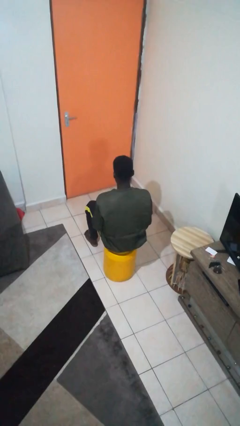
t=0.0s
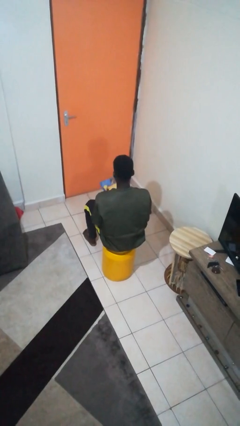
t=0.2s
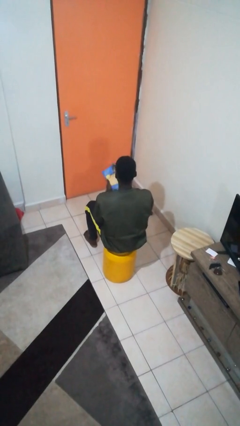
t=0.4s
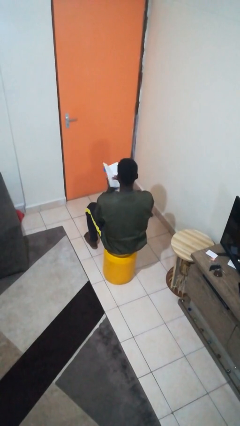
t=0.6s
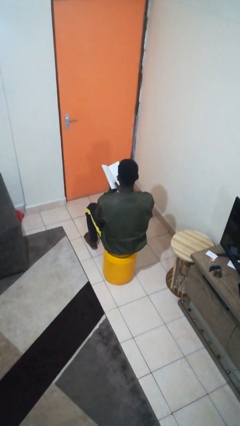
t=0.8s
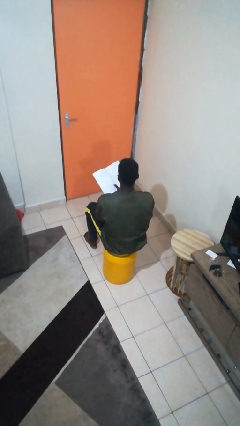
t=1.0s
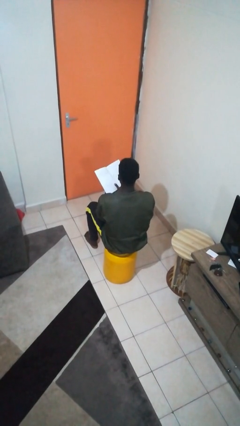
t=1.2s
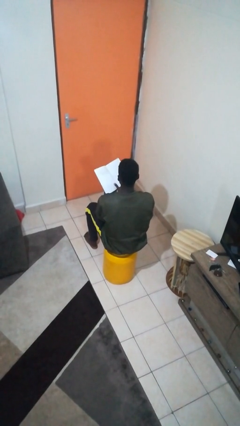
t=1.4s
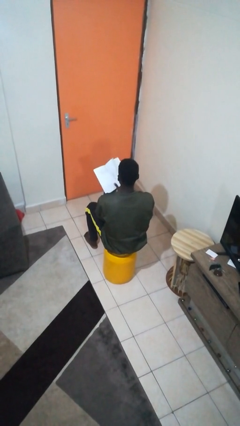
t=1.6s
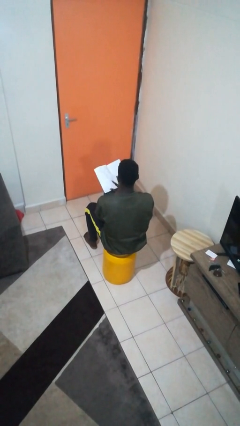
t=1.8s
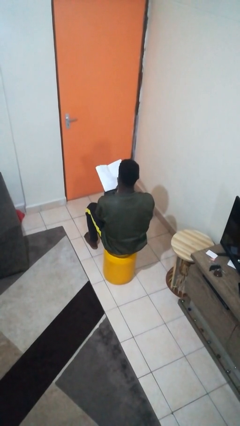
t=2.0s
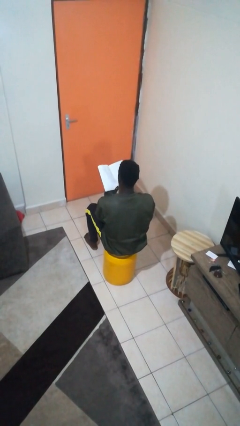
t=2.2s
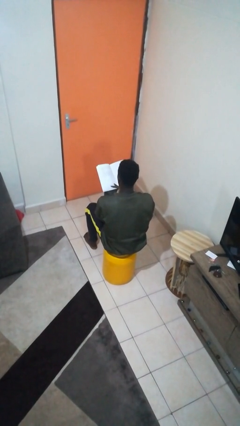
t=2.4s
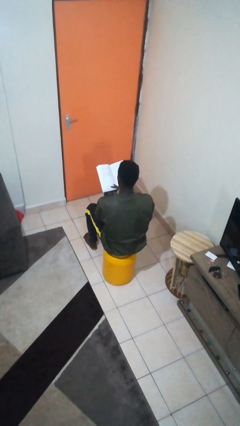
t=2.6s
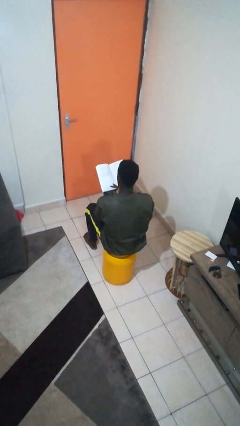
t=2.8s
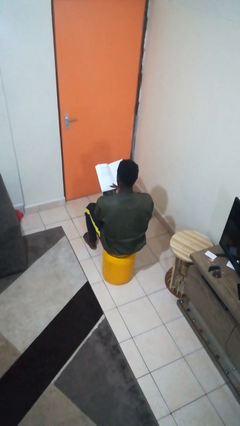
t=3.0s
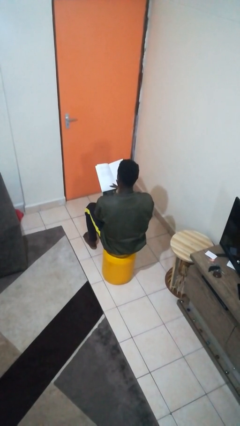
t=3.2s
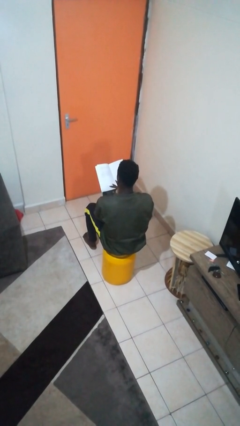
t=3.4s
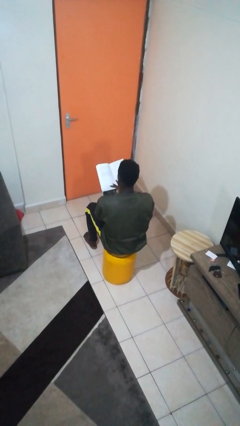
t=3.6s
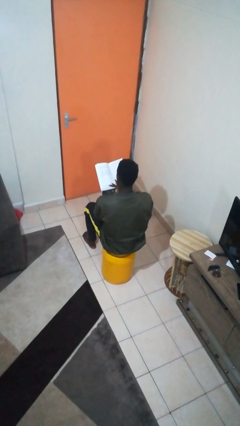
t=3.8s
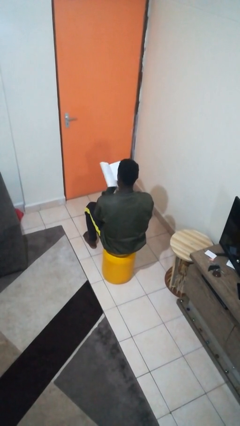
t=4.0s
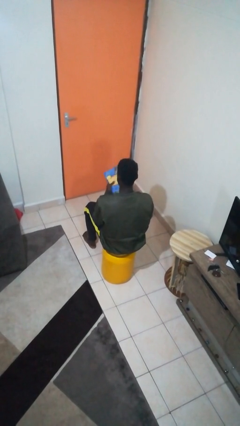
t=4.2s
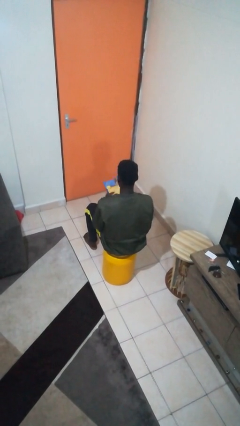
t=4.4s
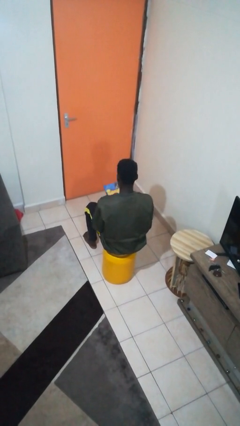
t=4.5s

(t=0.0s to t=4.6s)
person reads book

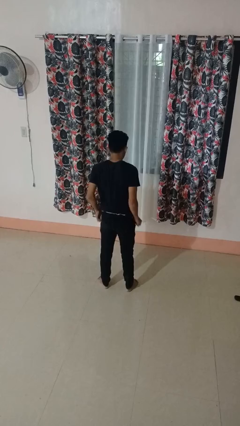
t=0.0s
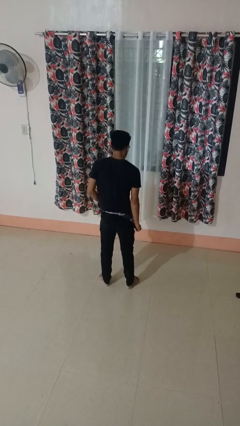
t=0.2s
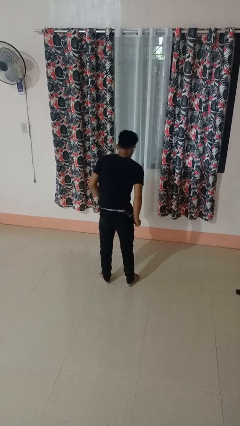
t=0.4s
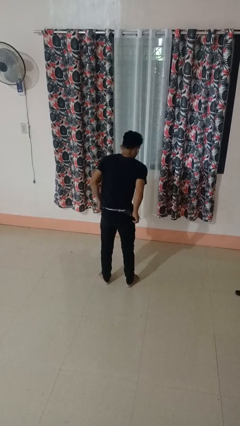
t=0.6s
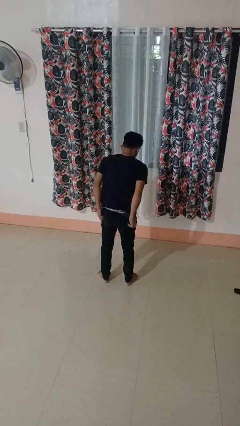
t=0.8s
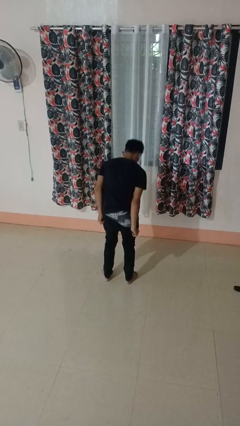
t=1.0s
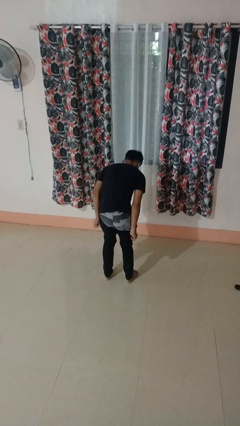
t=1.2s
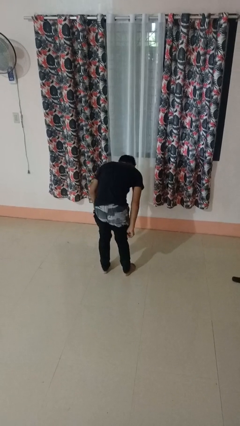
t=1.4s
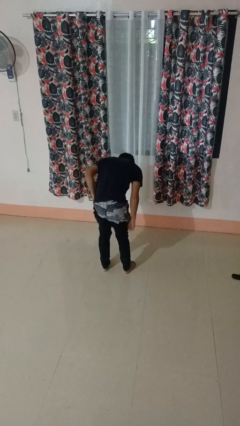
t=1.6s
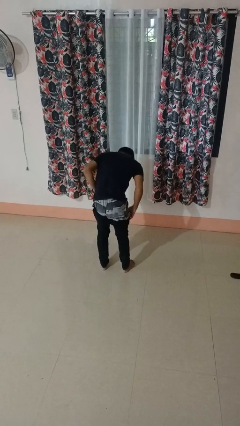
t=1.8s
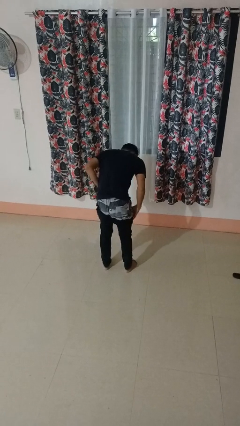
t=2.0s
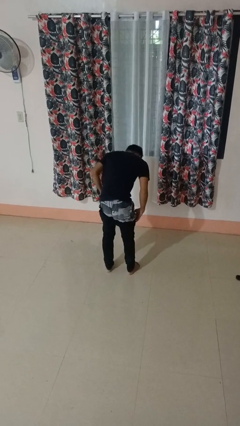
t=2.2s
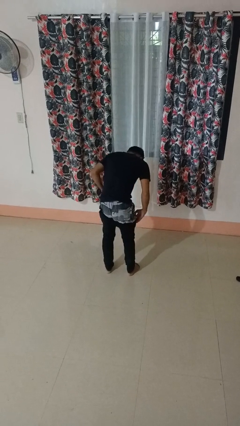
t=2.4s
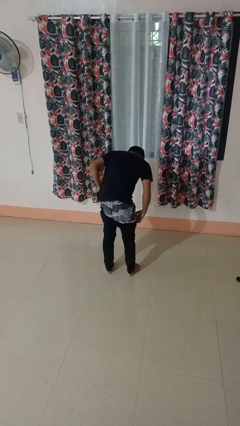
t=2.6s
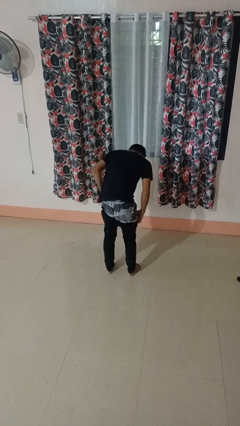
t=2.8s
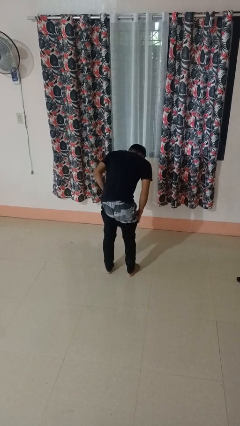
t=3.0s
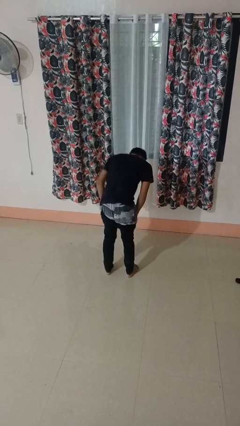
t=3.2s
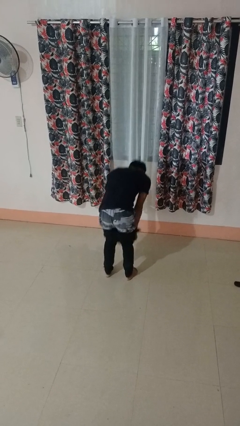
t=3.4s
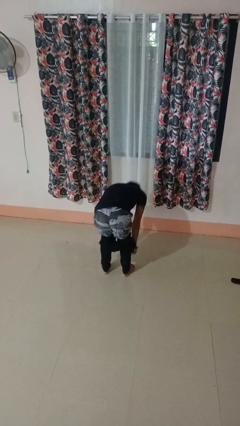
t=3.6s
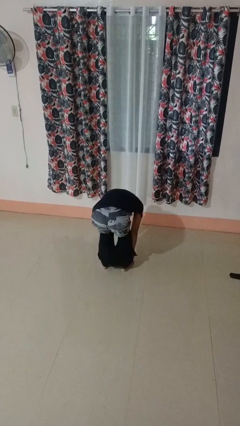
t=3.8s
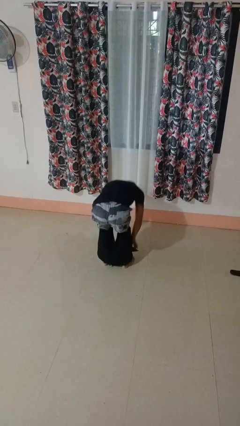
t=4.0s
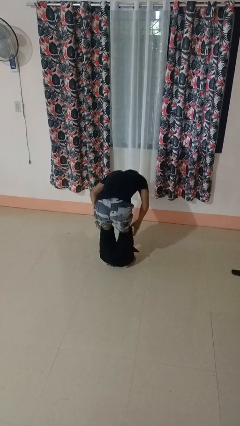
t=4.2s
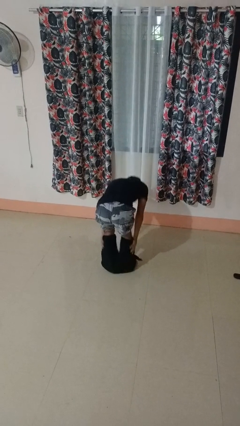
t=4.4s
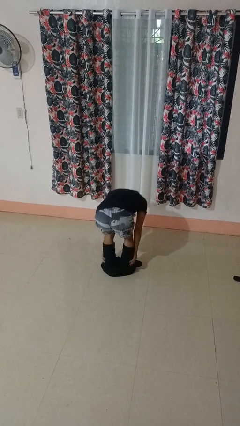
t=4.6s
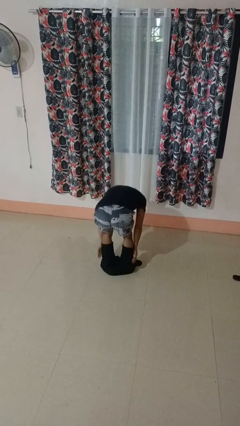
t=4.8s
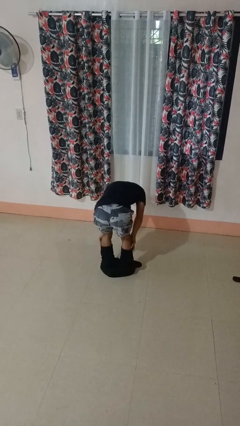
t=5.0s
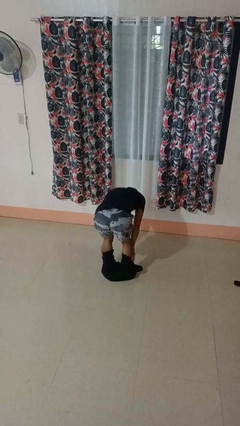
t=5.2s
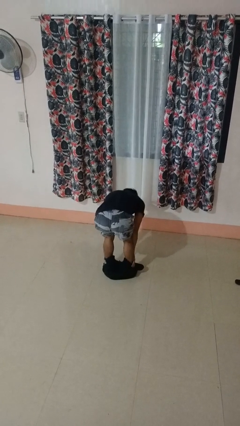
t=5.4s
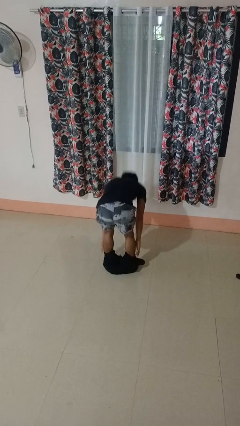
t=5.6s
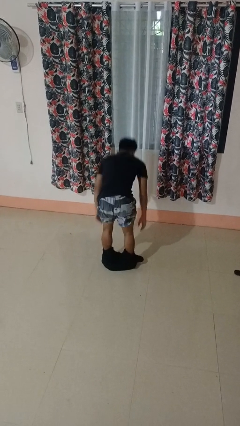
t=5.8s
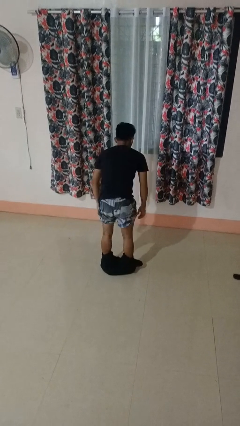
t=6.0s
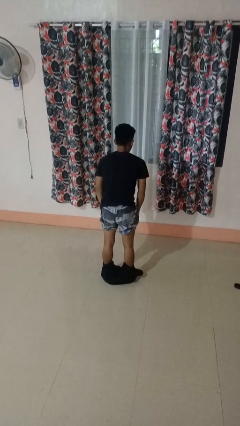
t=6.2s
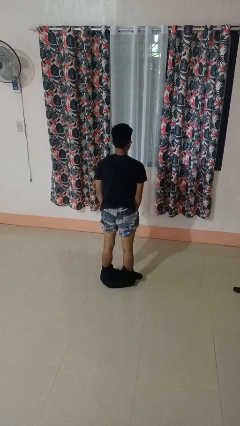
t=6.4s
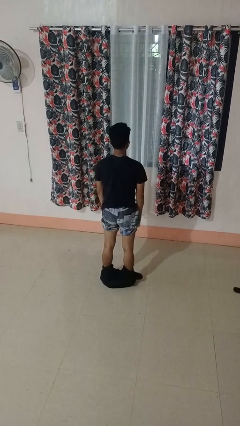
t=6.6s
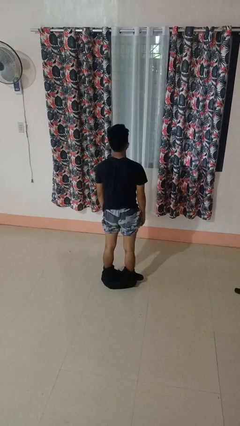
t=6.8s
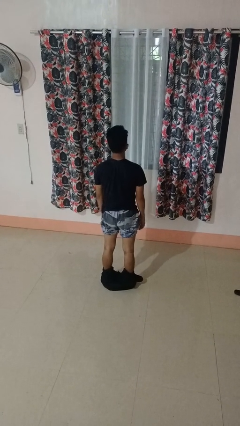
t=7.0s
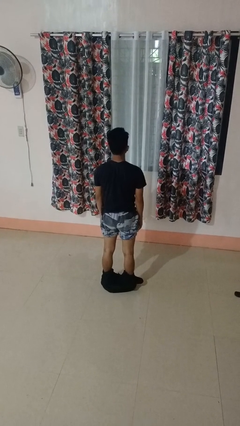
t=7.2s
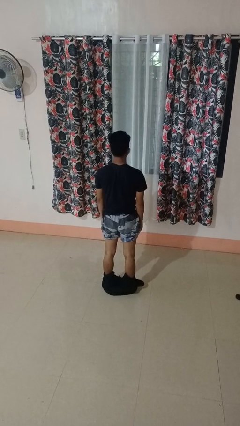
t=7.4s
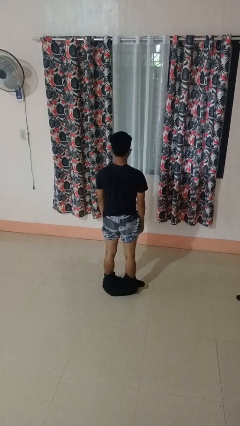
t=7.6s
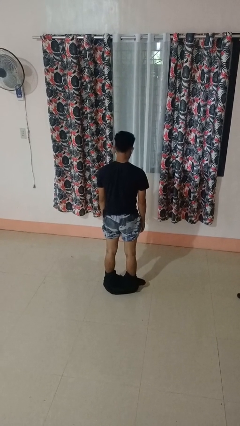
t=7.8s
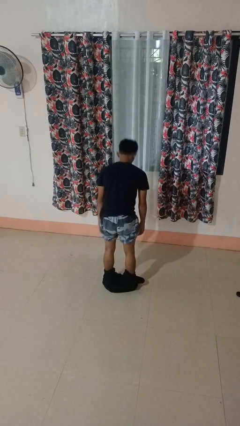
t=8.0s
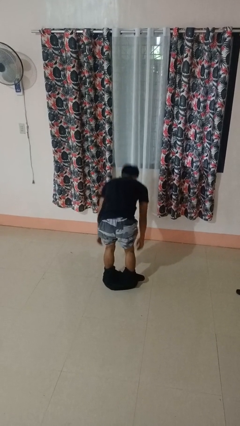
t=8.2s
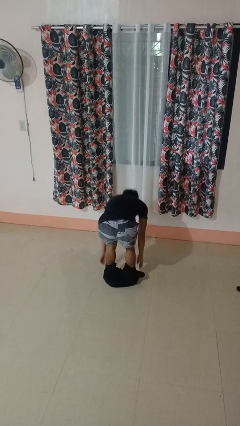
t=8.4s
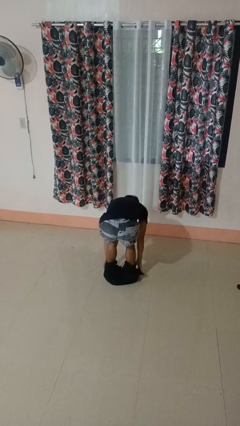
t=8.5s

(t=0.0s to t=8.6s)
person takes off pants

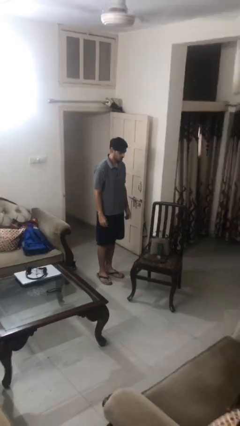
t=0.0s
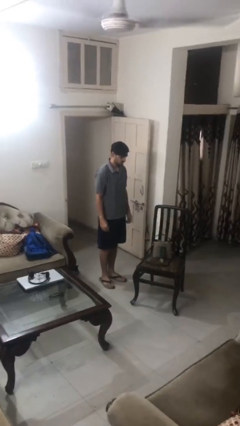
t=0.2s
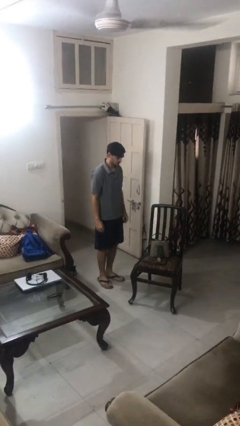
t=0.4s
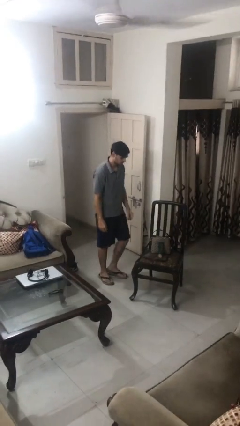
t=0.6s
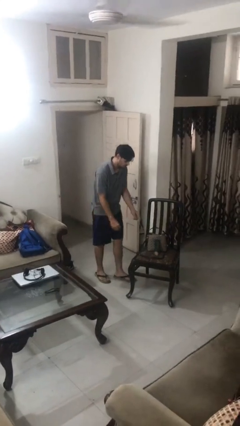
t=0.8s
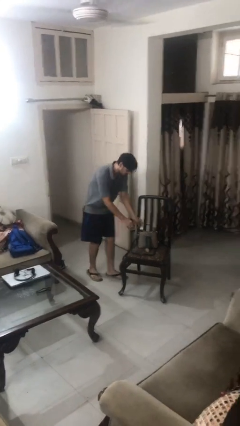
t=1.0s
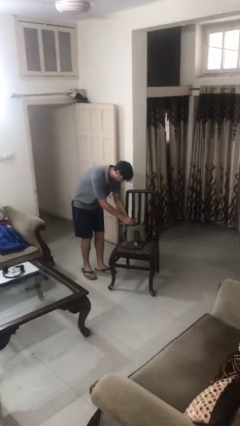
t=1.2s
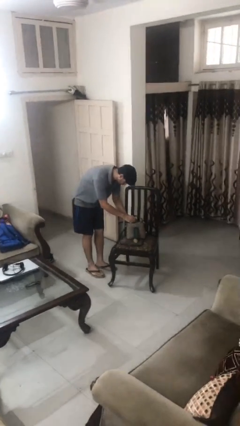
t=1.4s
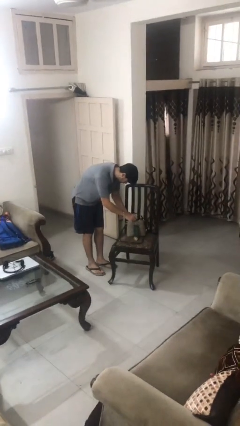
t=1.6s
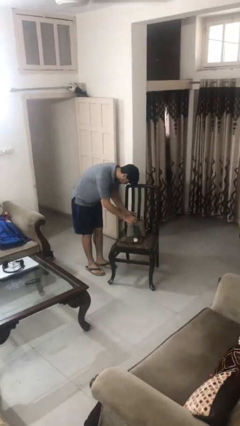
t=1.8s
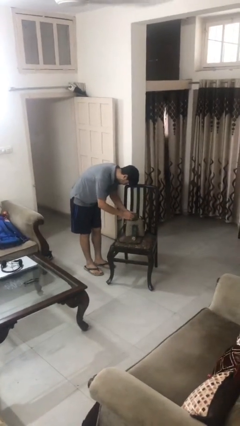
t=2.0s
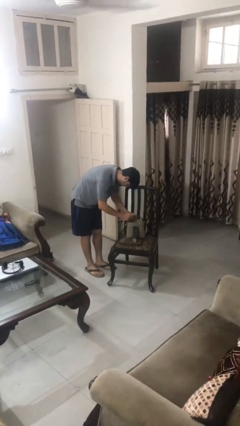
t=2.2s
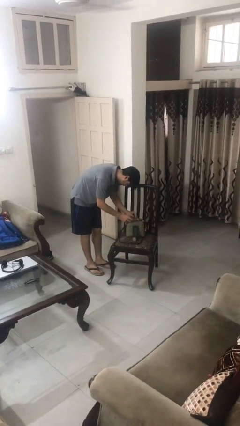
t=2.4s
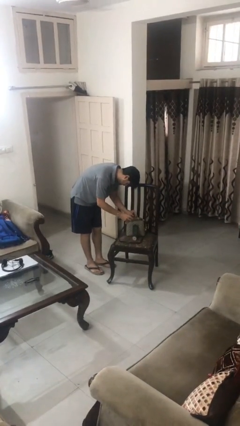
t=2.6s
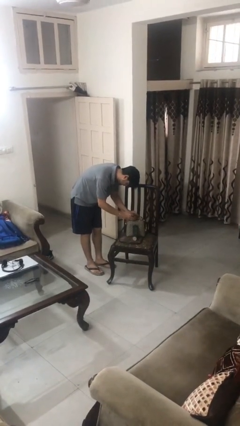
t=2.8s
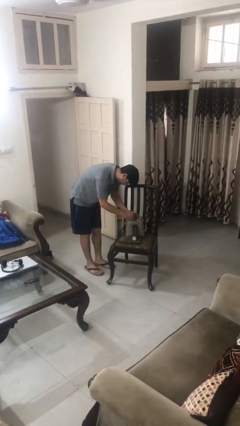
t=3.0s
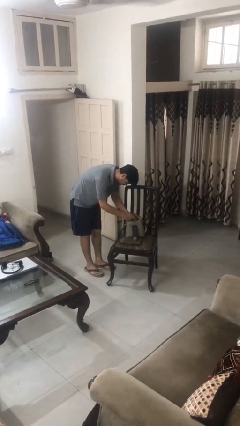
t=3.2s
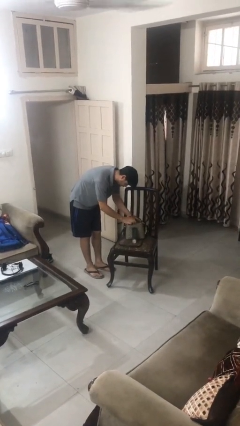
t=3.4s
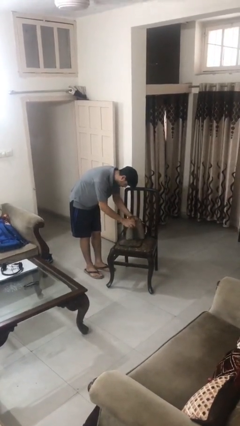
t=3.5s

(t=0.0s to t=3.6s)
person searches in purse

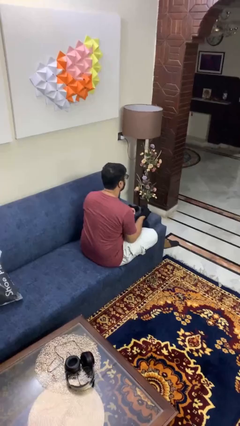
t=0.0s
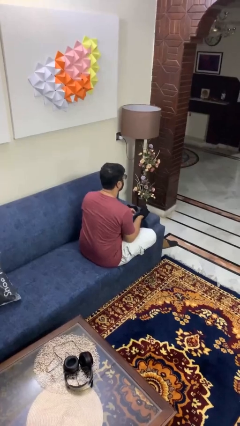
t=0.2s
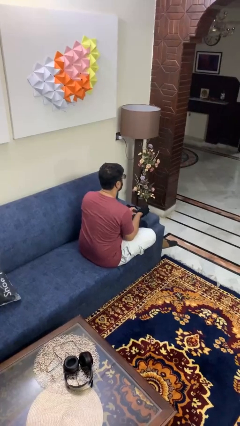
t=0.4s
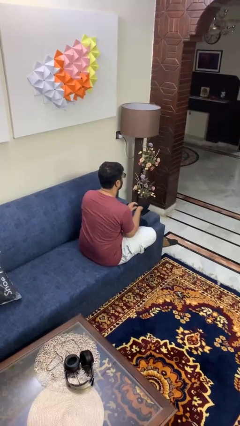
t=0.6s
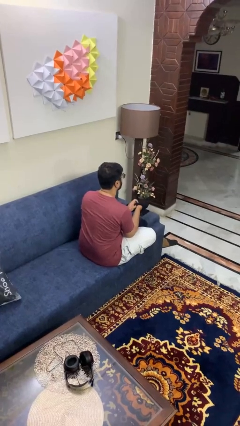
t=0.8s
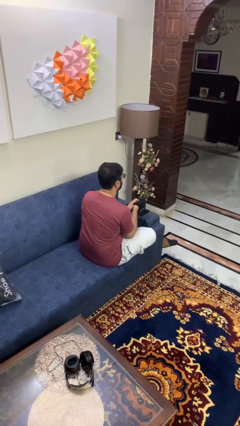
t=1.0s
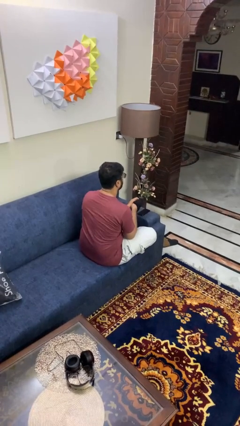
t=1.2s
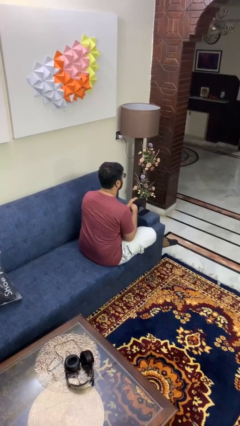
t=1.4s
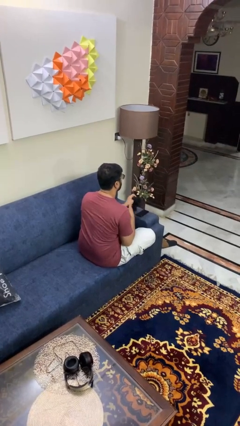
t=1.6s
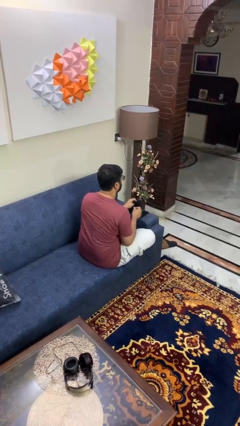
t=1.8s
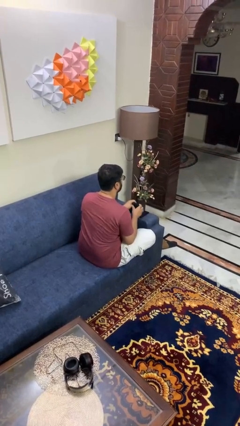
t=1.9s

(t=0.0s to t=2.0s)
person takes off gloves
